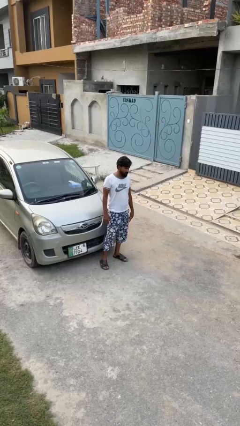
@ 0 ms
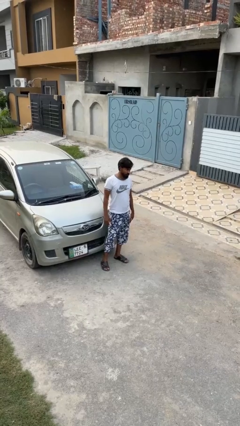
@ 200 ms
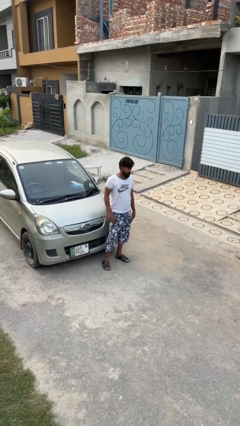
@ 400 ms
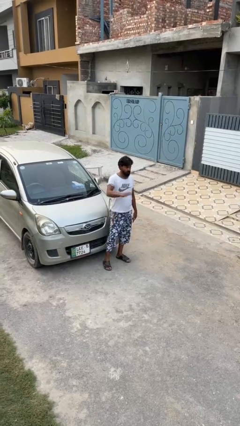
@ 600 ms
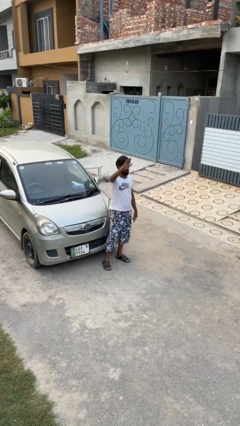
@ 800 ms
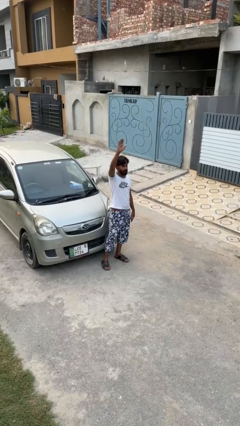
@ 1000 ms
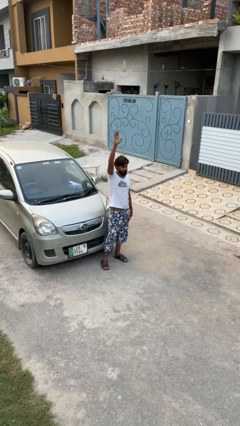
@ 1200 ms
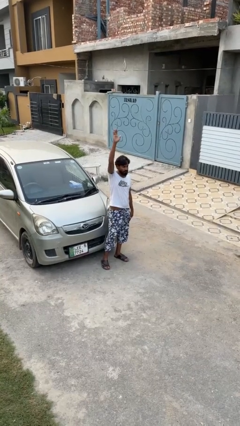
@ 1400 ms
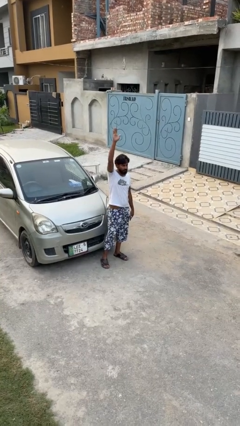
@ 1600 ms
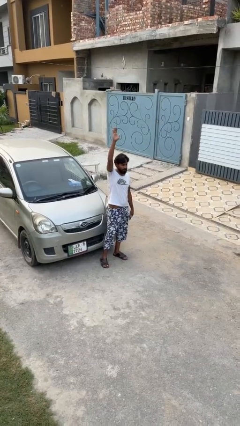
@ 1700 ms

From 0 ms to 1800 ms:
person gestures raise hand

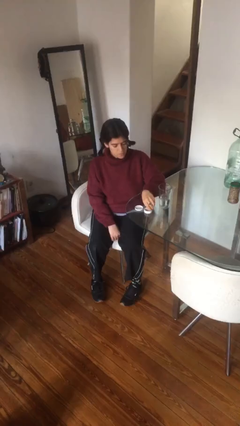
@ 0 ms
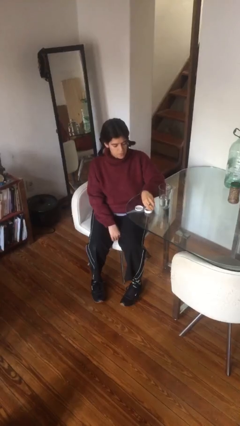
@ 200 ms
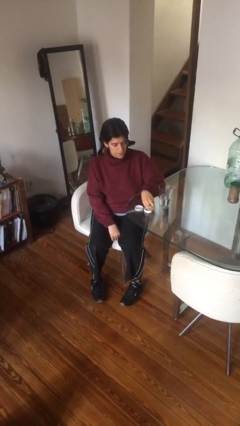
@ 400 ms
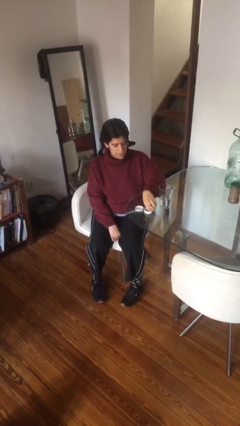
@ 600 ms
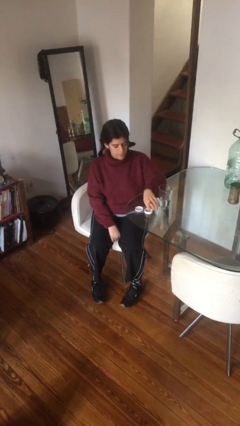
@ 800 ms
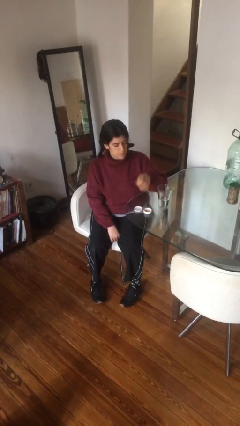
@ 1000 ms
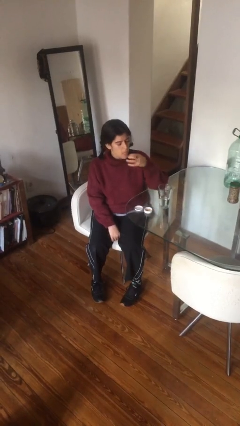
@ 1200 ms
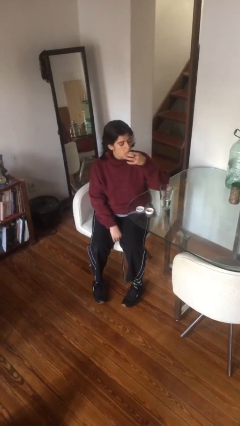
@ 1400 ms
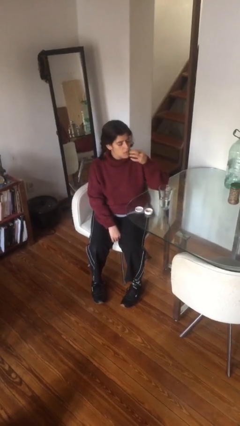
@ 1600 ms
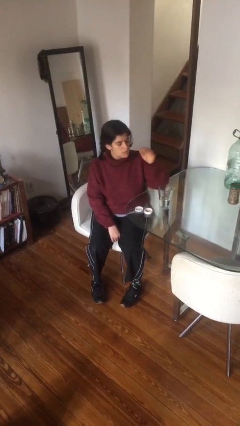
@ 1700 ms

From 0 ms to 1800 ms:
person takes medicine pills

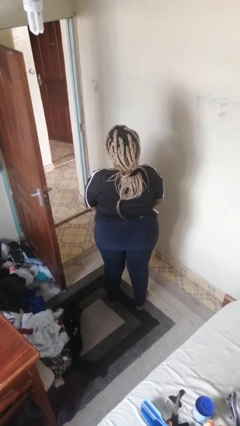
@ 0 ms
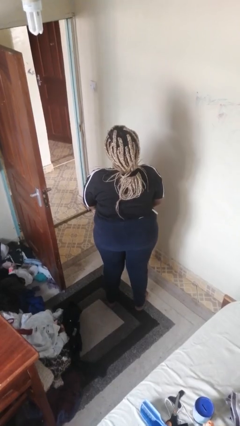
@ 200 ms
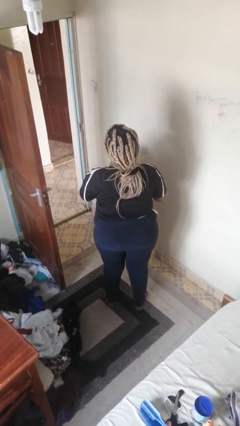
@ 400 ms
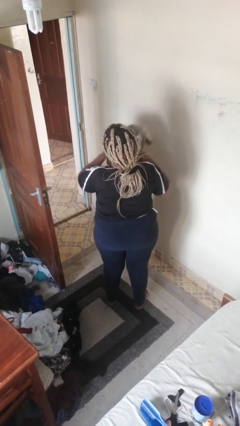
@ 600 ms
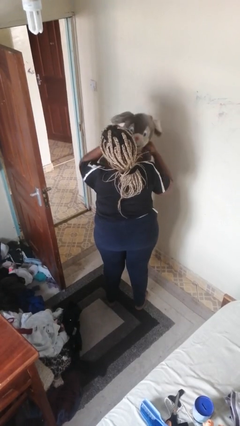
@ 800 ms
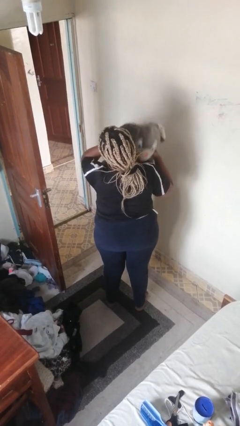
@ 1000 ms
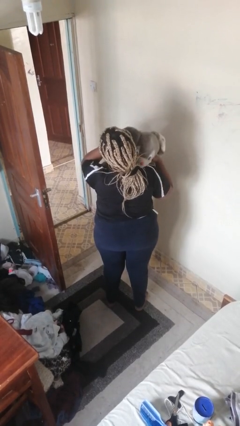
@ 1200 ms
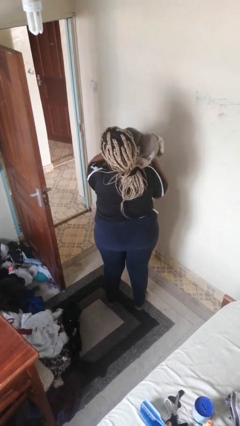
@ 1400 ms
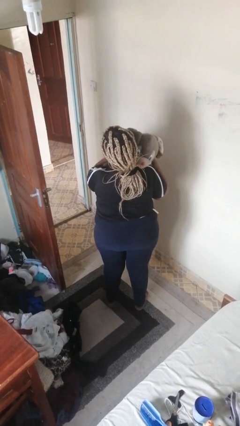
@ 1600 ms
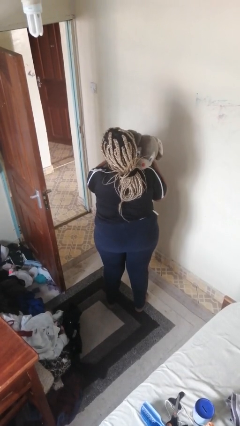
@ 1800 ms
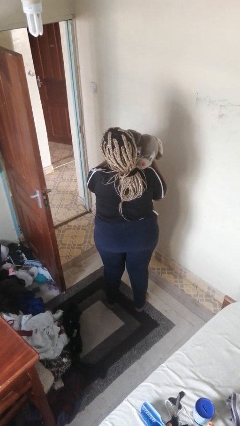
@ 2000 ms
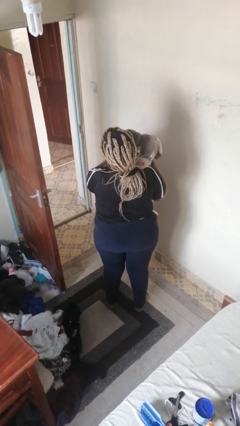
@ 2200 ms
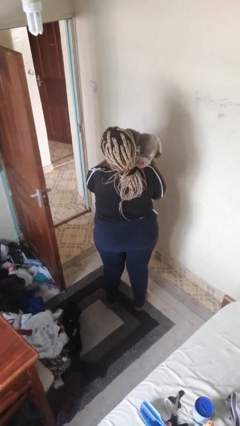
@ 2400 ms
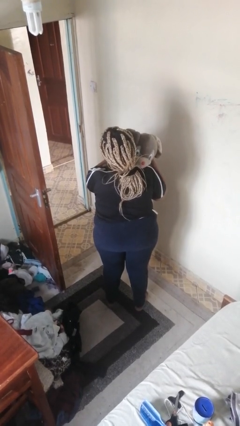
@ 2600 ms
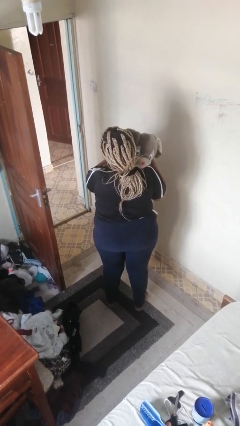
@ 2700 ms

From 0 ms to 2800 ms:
person hugs stuffed animal

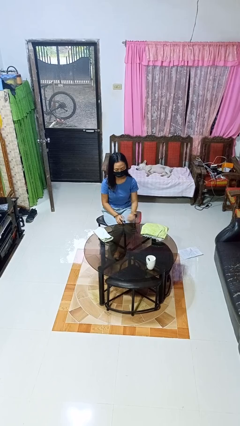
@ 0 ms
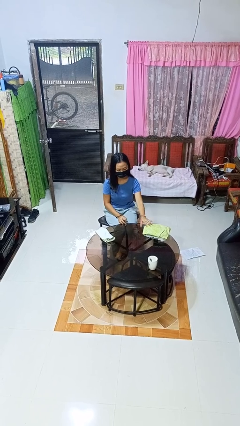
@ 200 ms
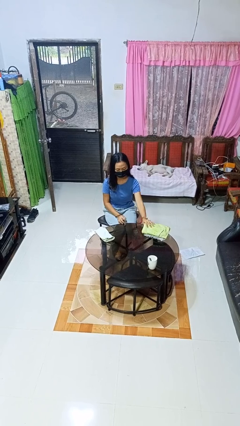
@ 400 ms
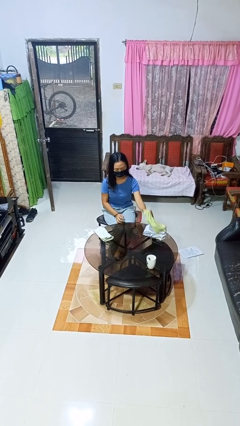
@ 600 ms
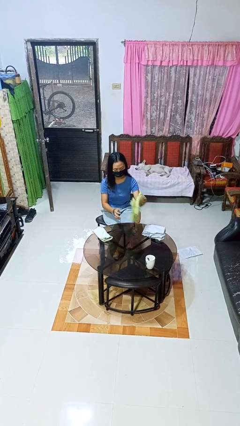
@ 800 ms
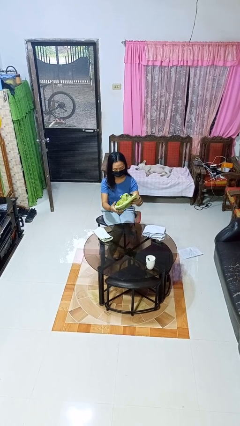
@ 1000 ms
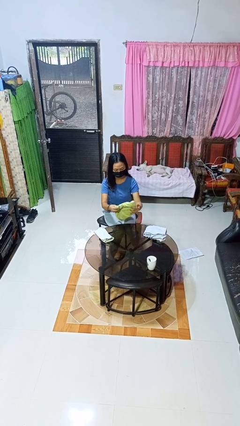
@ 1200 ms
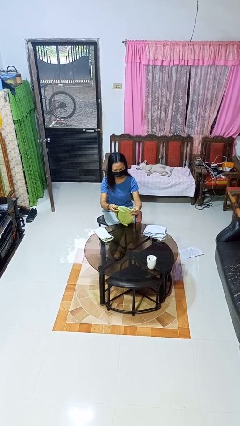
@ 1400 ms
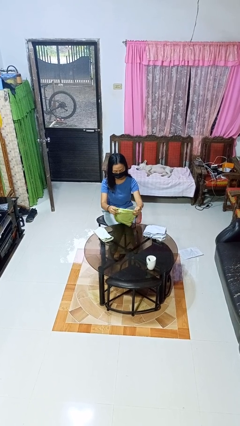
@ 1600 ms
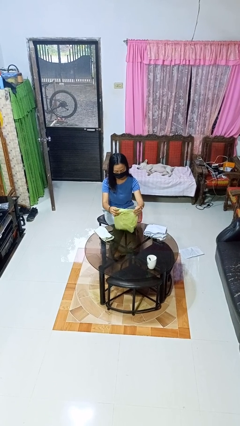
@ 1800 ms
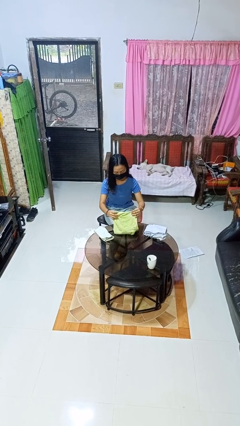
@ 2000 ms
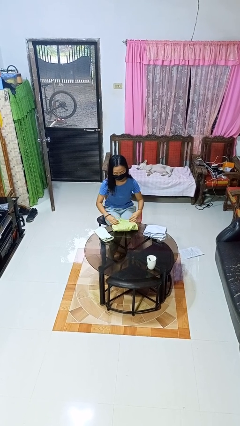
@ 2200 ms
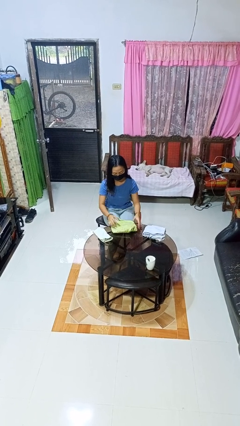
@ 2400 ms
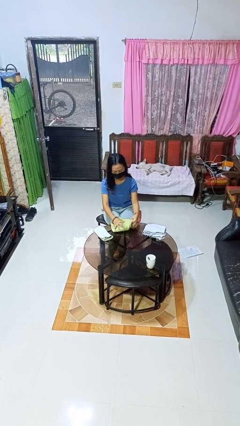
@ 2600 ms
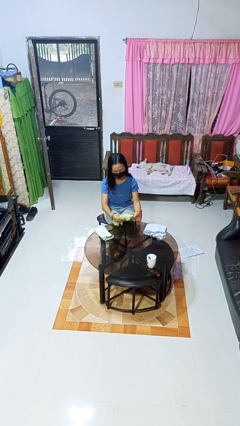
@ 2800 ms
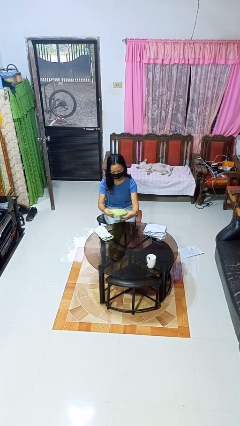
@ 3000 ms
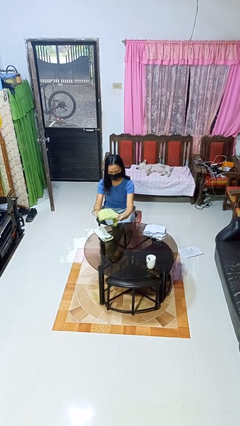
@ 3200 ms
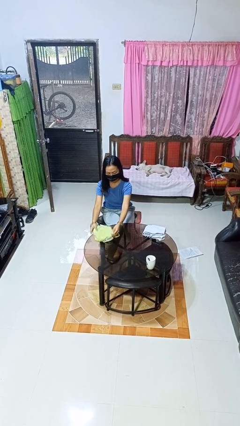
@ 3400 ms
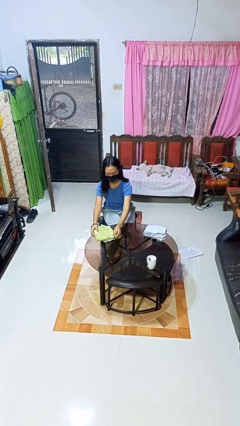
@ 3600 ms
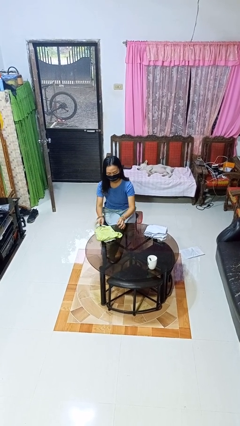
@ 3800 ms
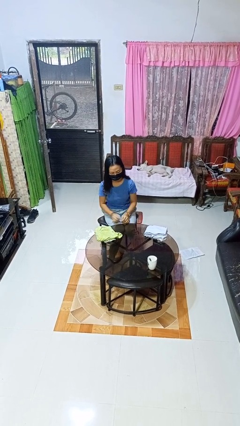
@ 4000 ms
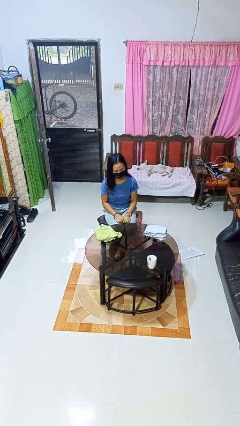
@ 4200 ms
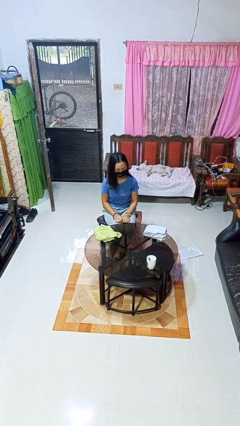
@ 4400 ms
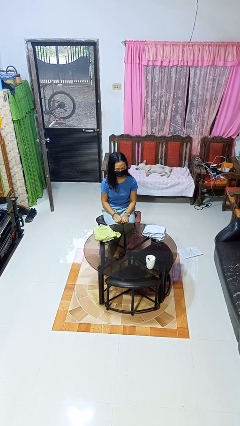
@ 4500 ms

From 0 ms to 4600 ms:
person folds towel

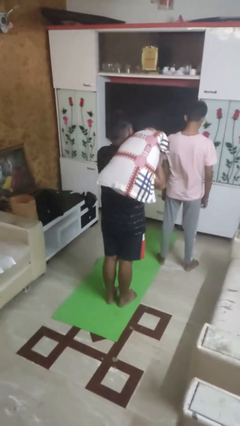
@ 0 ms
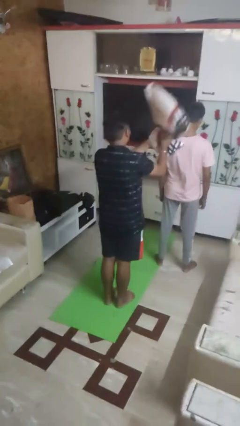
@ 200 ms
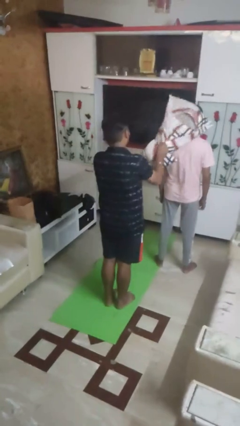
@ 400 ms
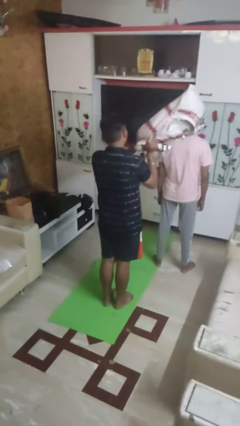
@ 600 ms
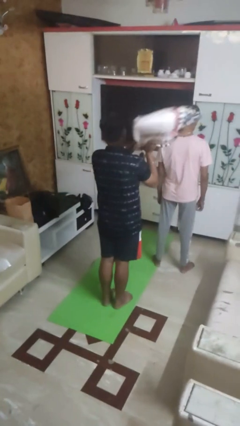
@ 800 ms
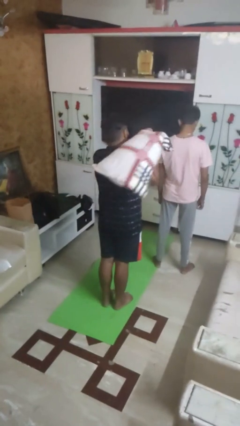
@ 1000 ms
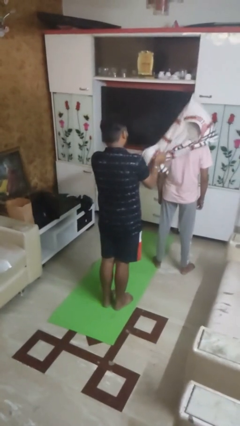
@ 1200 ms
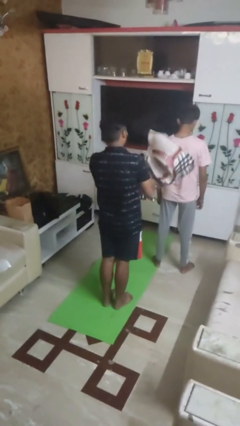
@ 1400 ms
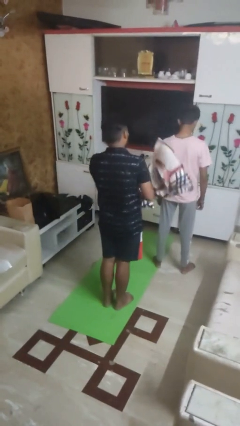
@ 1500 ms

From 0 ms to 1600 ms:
person hits person with pillow

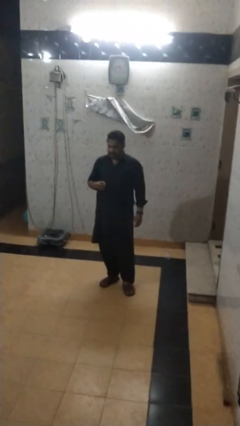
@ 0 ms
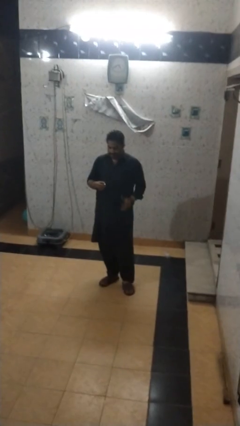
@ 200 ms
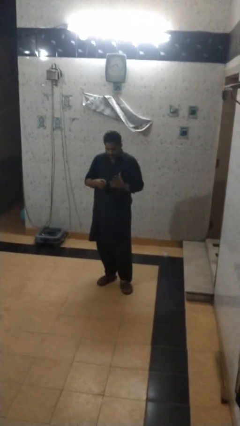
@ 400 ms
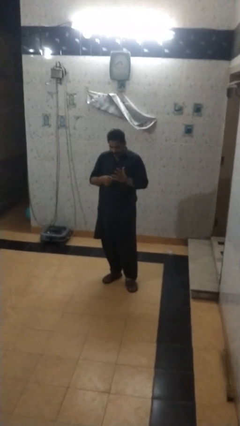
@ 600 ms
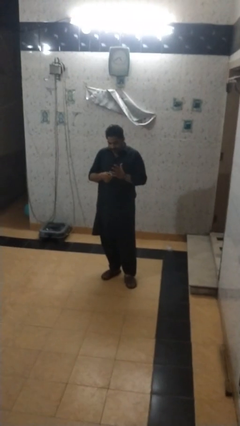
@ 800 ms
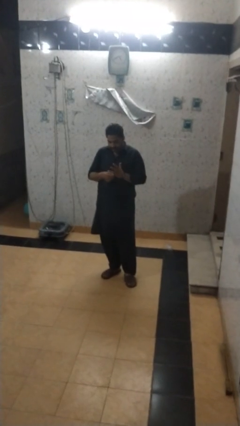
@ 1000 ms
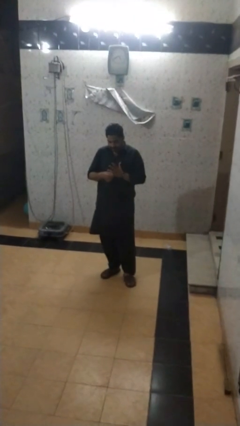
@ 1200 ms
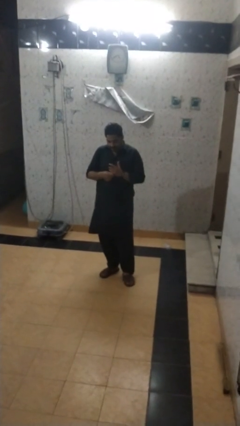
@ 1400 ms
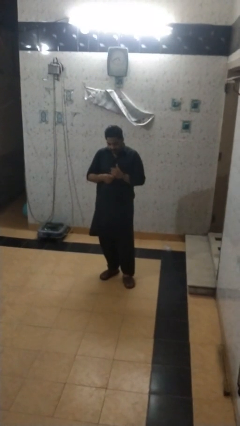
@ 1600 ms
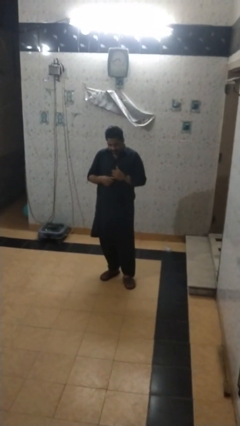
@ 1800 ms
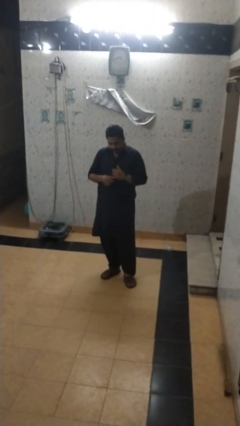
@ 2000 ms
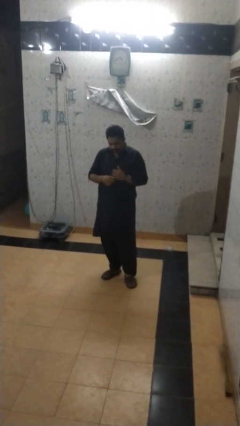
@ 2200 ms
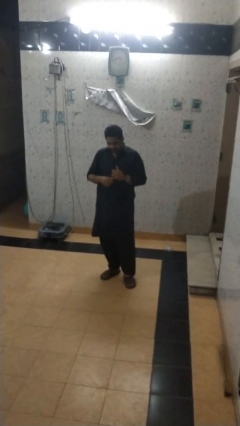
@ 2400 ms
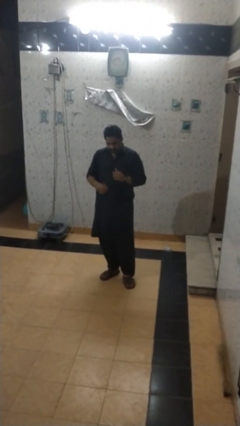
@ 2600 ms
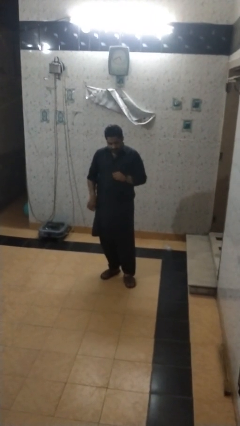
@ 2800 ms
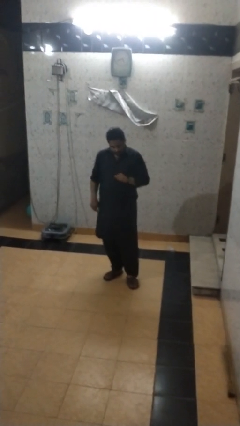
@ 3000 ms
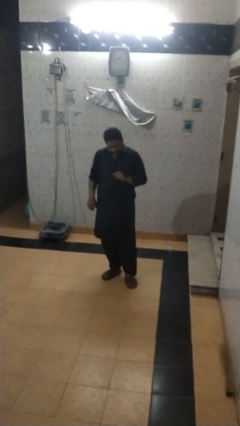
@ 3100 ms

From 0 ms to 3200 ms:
person puts on ring

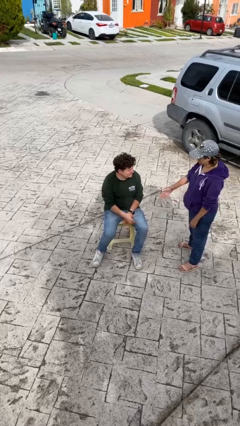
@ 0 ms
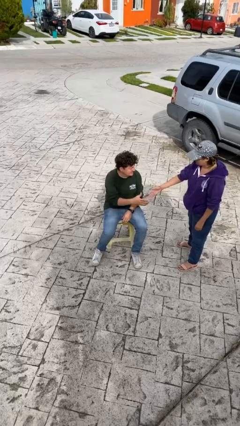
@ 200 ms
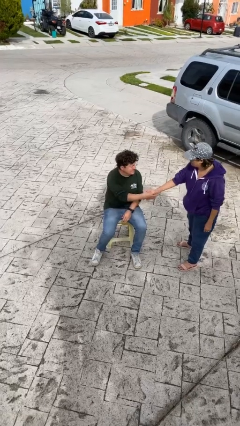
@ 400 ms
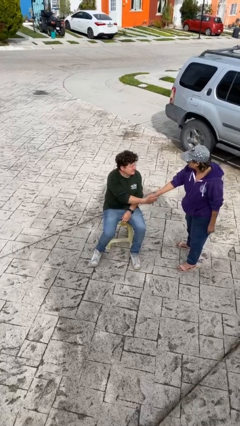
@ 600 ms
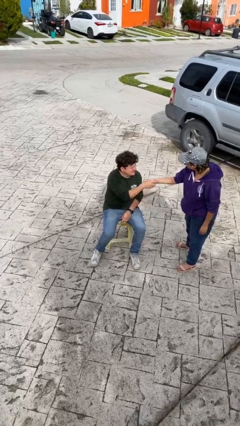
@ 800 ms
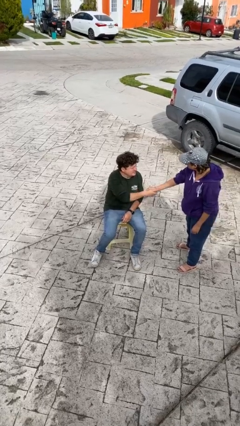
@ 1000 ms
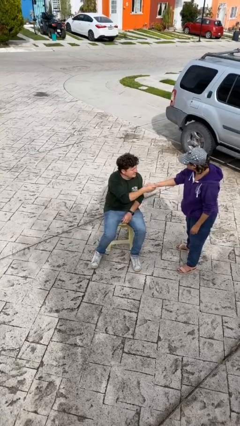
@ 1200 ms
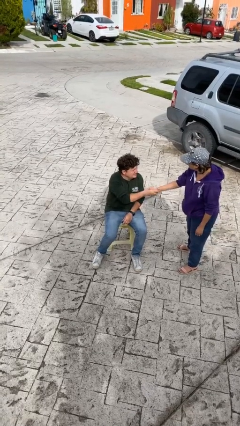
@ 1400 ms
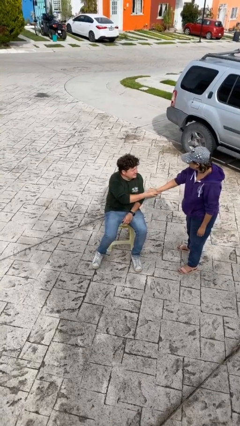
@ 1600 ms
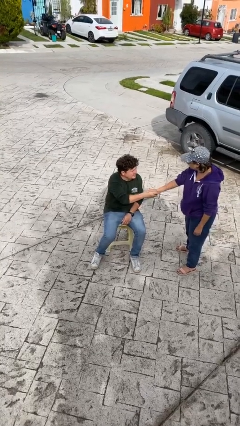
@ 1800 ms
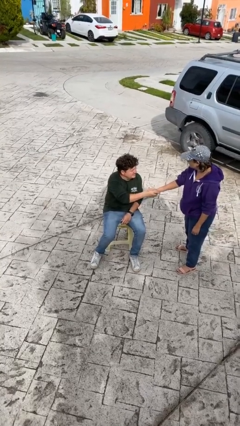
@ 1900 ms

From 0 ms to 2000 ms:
person shakes hand
